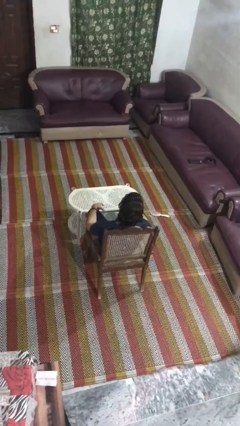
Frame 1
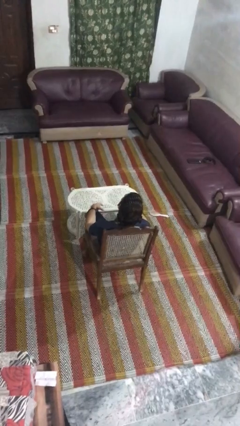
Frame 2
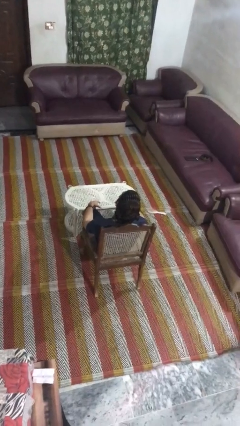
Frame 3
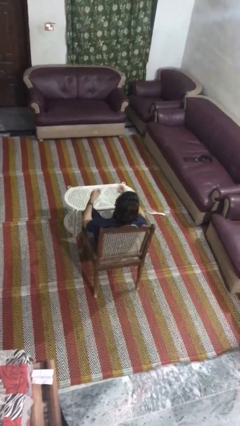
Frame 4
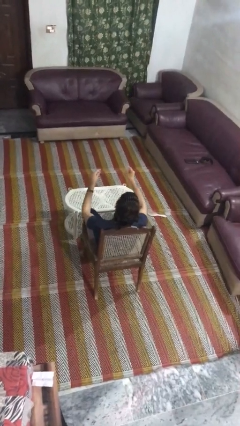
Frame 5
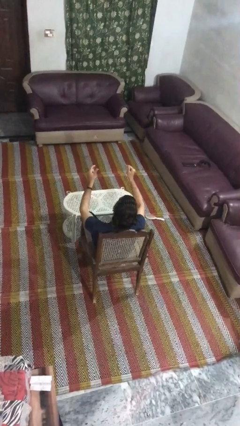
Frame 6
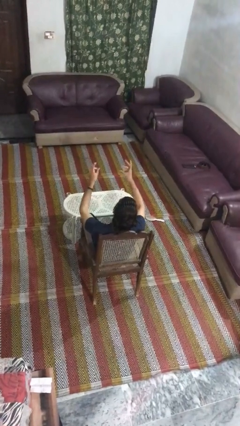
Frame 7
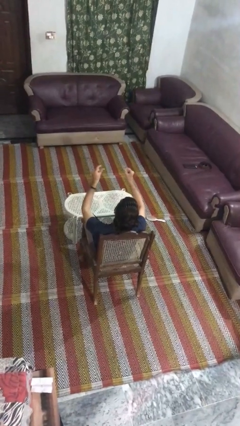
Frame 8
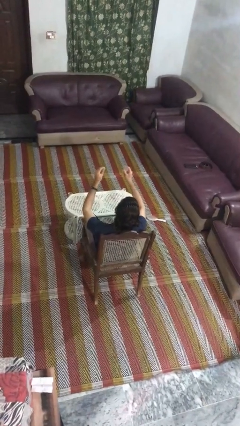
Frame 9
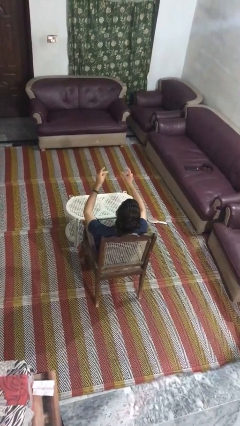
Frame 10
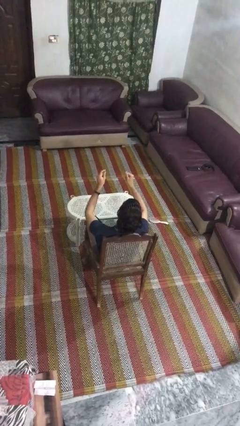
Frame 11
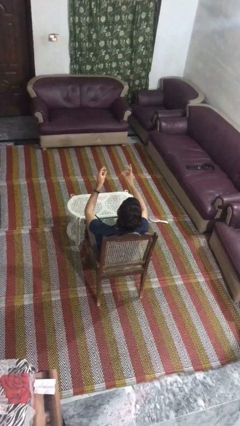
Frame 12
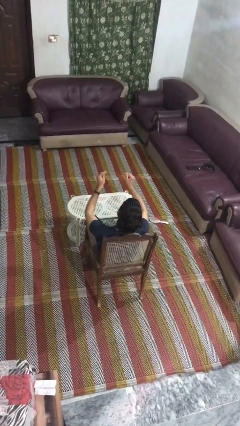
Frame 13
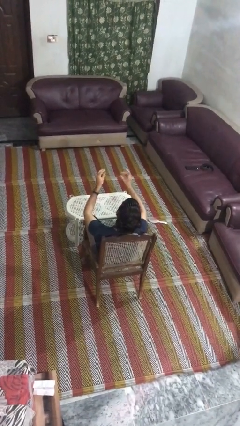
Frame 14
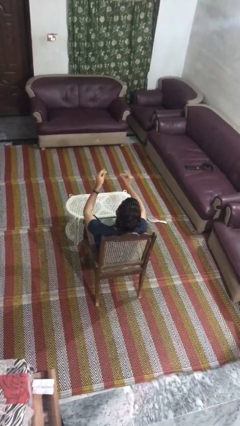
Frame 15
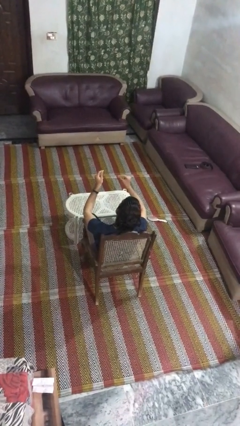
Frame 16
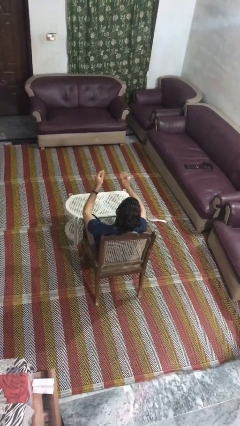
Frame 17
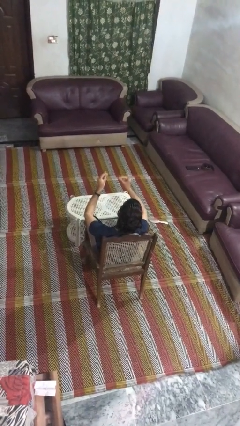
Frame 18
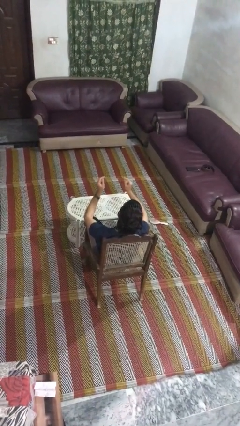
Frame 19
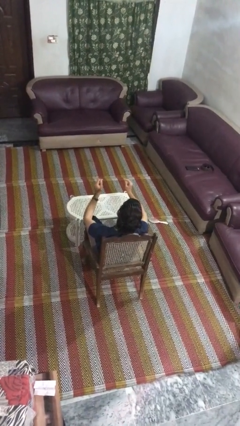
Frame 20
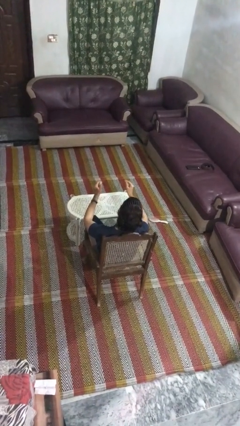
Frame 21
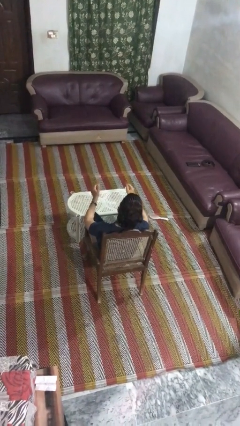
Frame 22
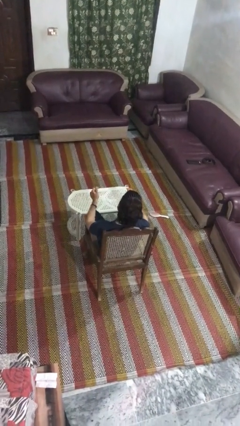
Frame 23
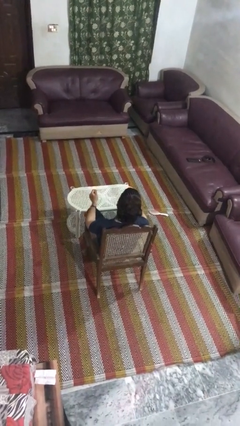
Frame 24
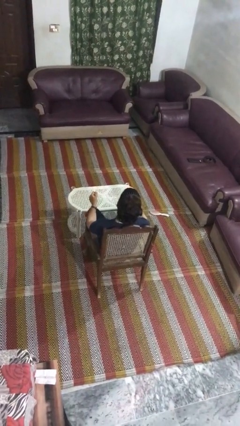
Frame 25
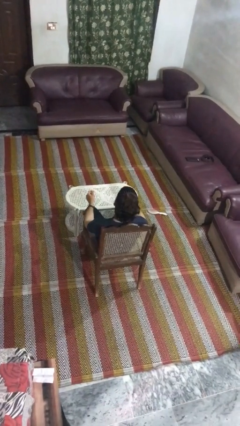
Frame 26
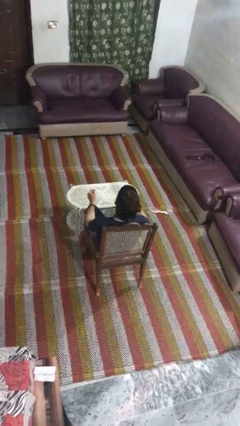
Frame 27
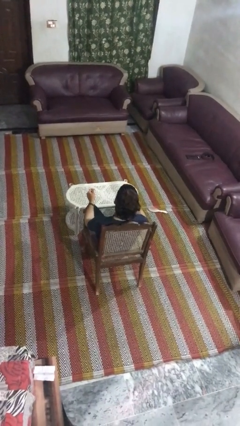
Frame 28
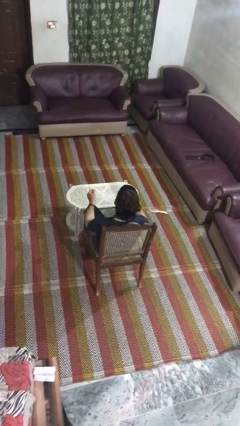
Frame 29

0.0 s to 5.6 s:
person snaps fingers

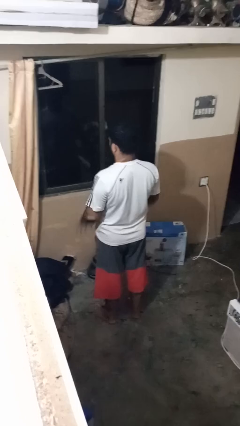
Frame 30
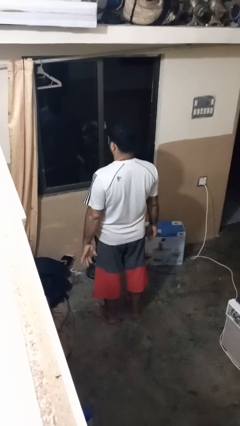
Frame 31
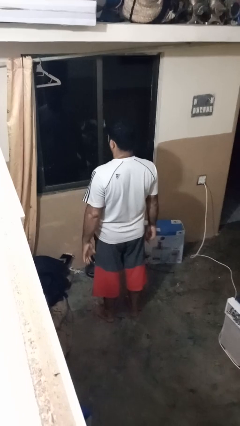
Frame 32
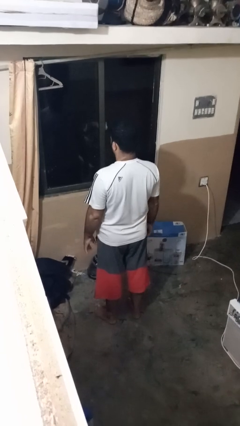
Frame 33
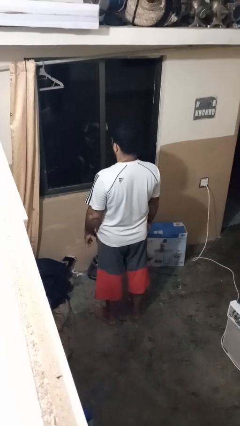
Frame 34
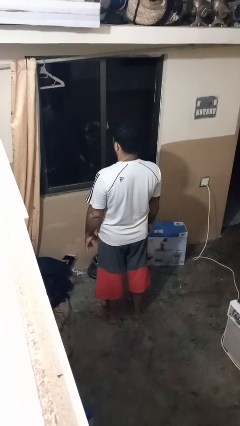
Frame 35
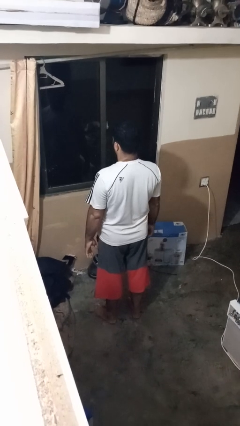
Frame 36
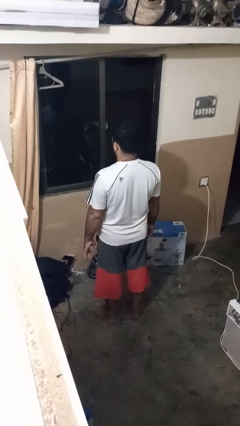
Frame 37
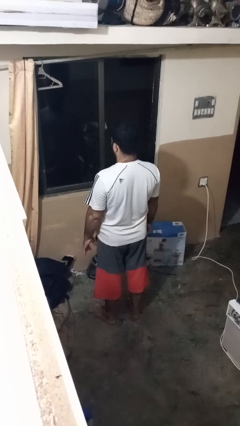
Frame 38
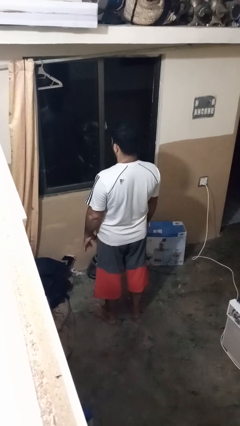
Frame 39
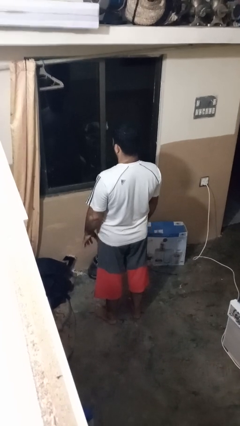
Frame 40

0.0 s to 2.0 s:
person takes off ring

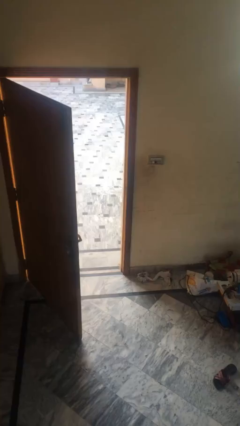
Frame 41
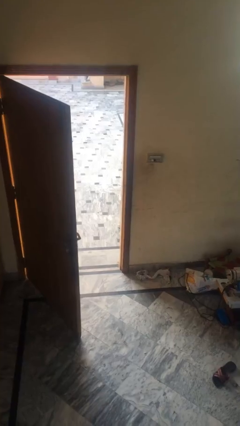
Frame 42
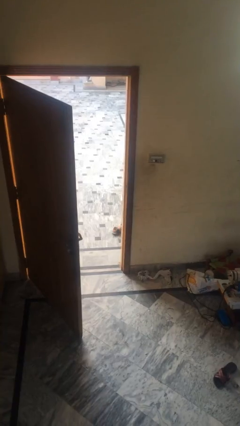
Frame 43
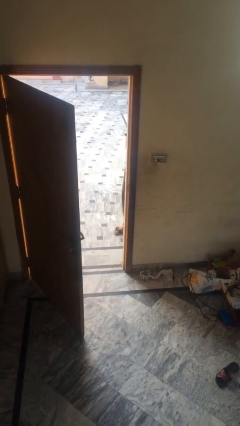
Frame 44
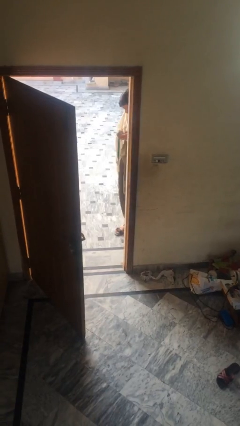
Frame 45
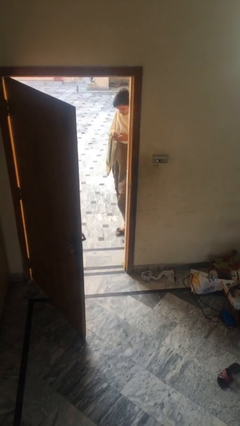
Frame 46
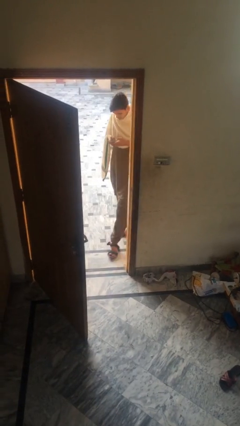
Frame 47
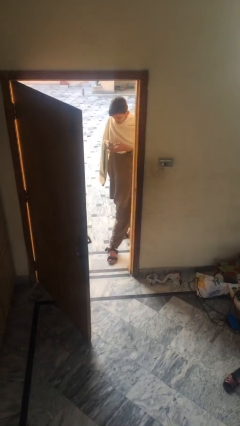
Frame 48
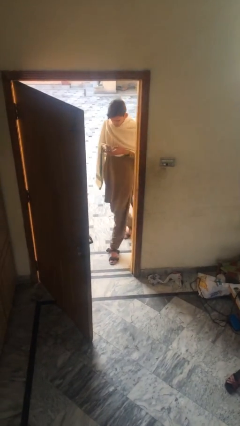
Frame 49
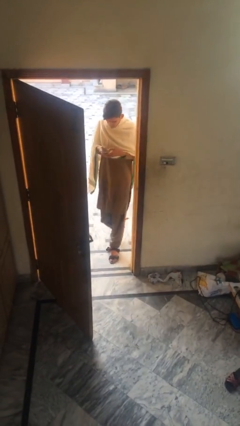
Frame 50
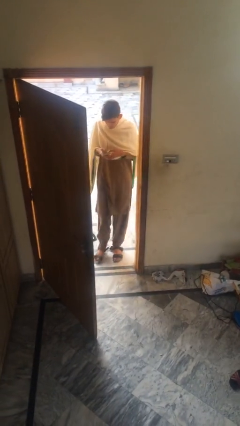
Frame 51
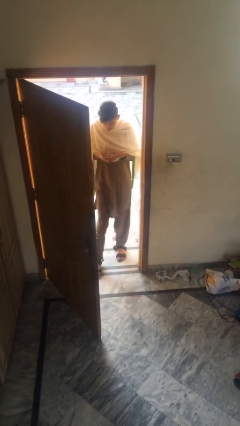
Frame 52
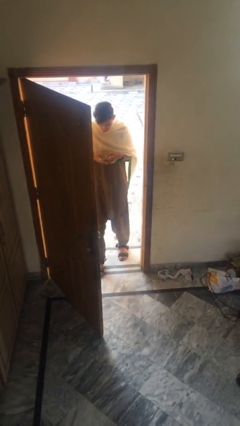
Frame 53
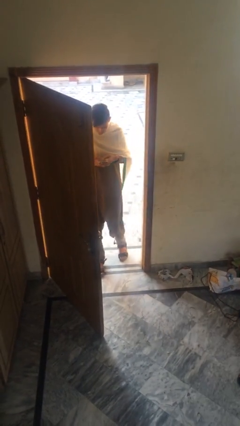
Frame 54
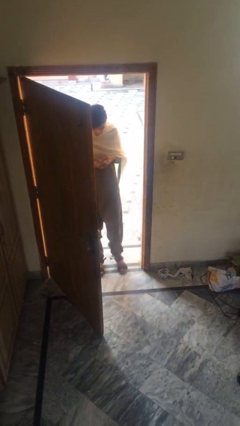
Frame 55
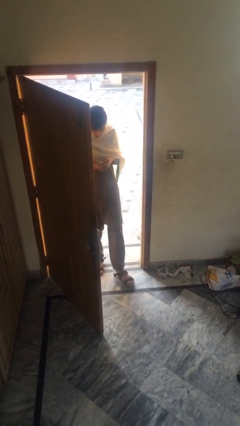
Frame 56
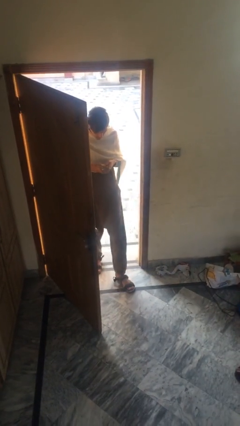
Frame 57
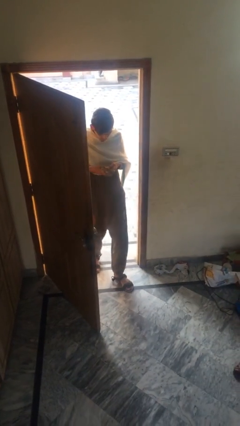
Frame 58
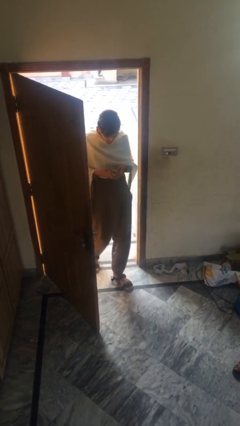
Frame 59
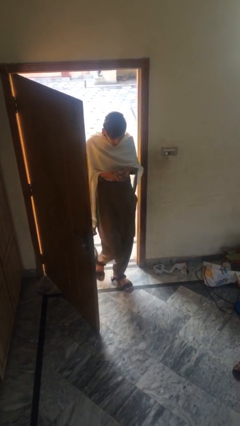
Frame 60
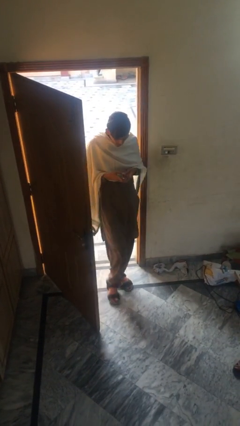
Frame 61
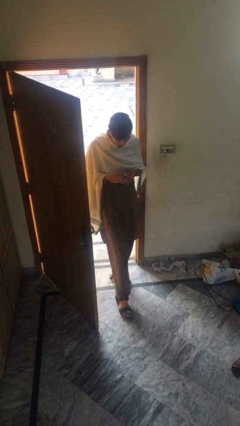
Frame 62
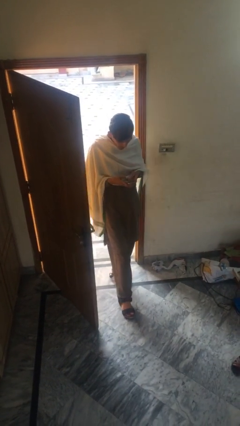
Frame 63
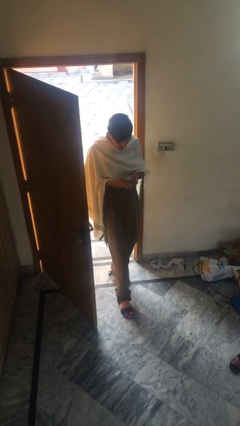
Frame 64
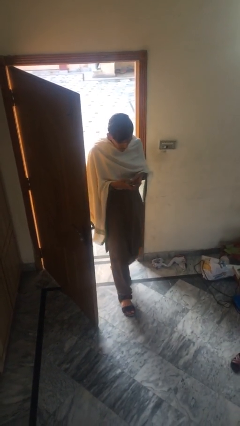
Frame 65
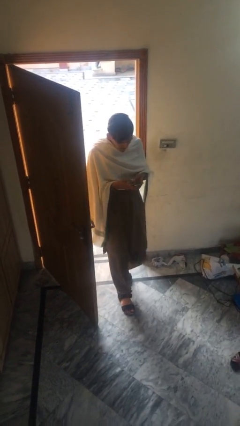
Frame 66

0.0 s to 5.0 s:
person enters scene through structure

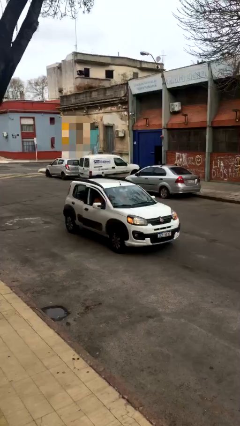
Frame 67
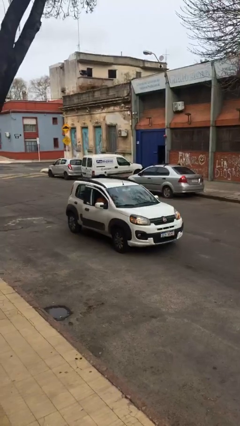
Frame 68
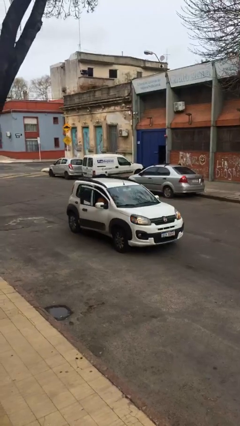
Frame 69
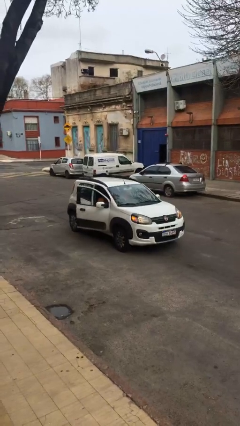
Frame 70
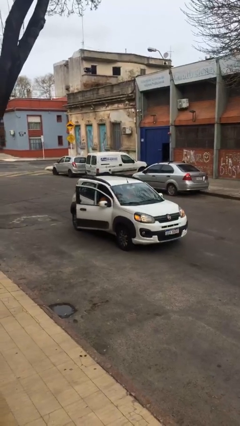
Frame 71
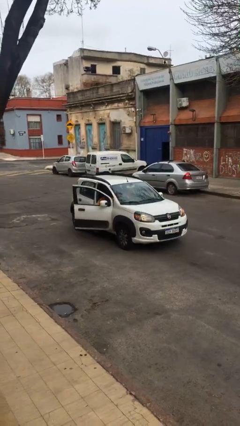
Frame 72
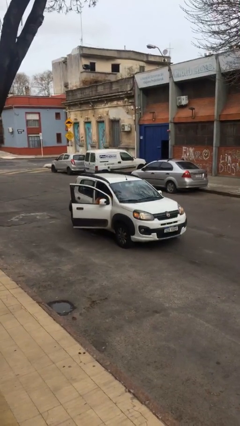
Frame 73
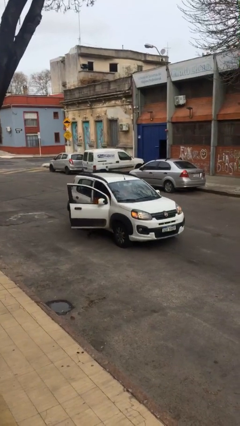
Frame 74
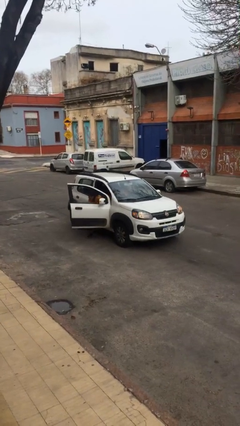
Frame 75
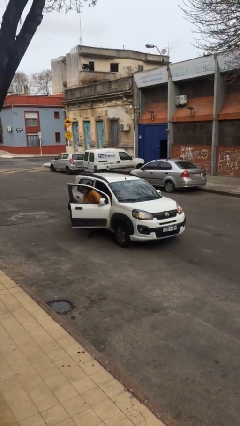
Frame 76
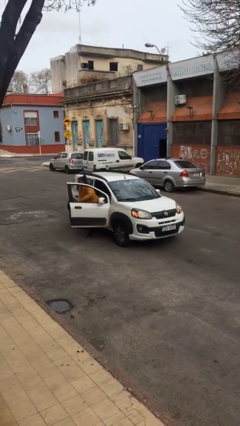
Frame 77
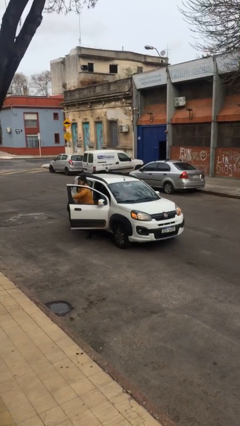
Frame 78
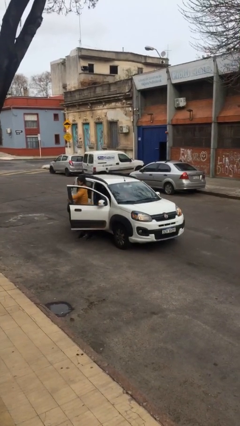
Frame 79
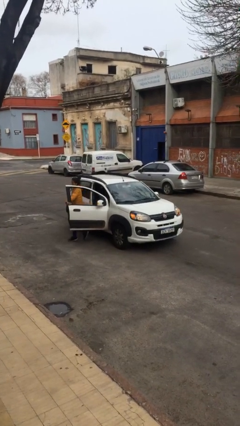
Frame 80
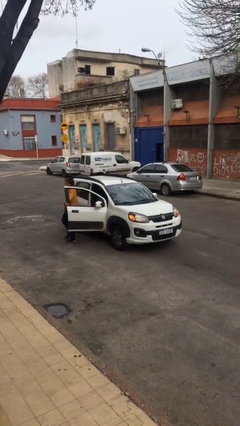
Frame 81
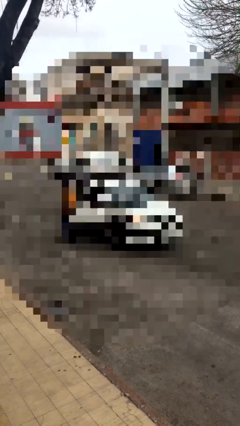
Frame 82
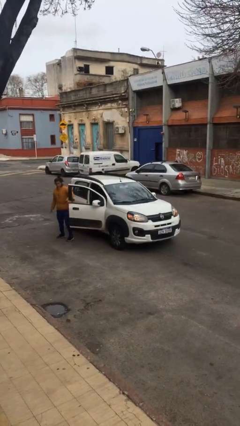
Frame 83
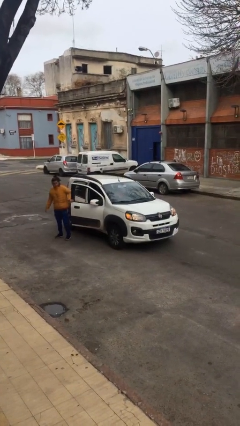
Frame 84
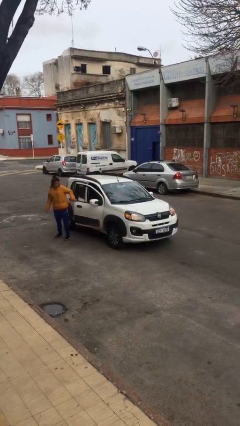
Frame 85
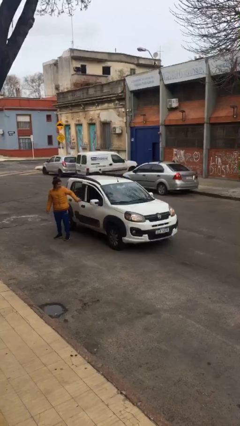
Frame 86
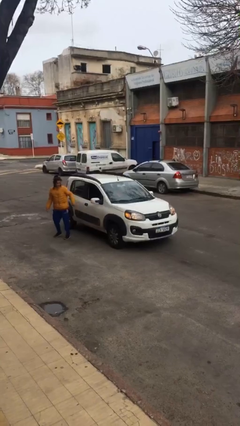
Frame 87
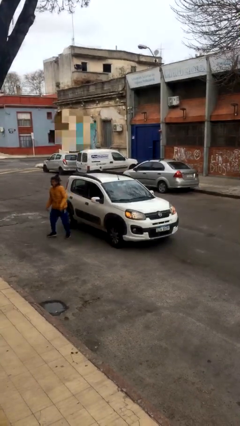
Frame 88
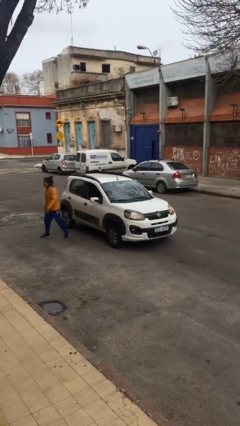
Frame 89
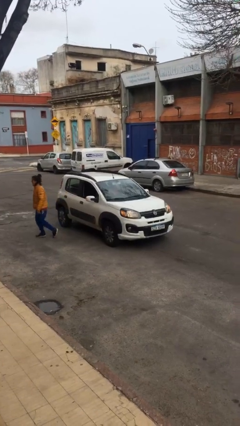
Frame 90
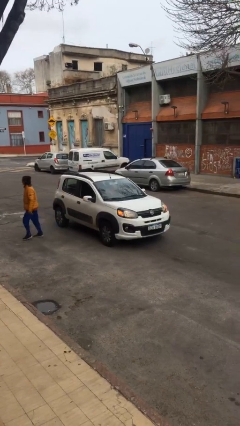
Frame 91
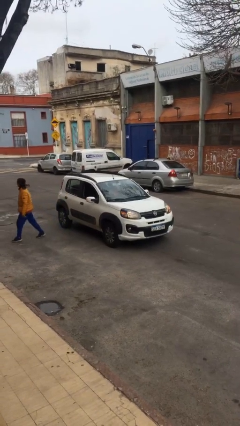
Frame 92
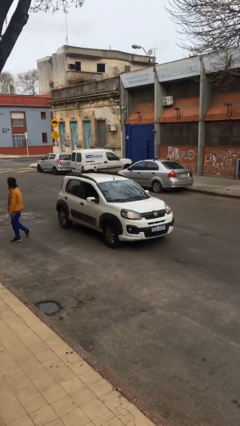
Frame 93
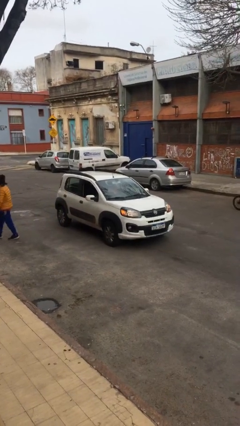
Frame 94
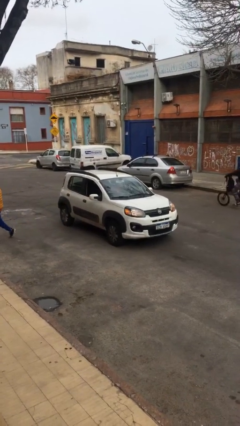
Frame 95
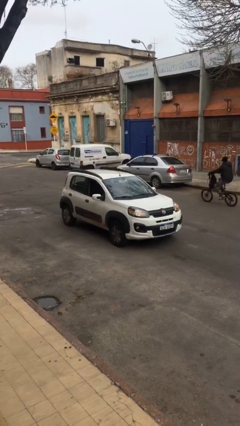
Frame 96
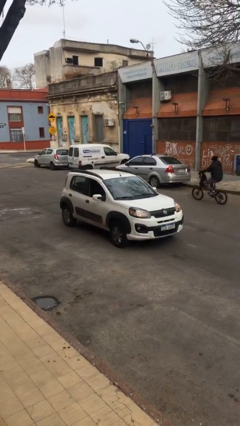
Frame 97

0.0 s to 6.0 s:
car drops off person
